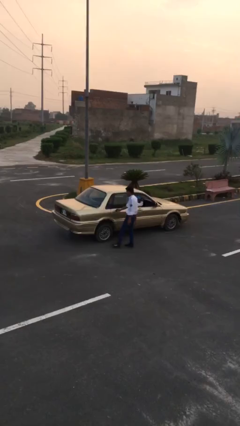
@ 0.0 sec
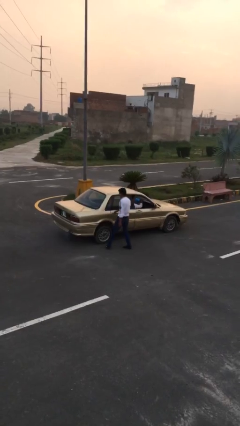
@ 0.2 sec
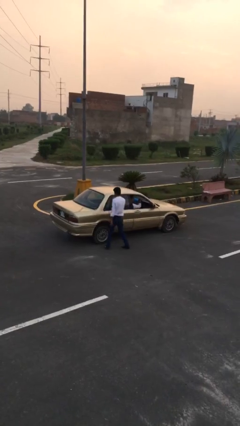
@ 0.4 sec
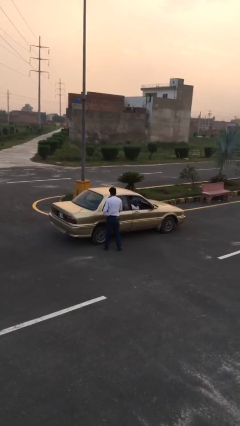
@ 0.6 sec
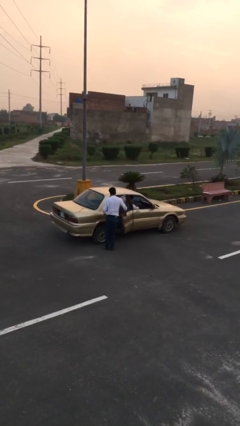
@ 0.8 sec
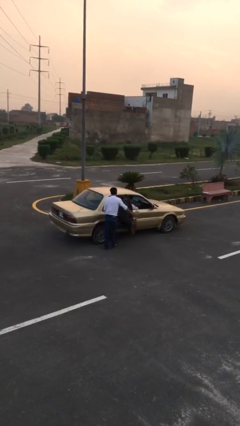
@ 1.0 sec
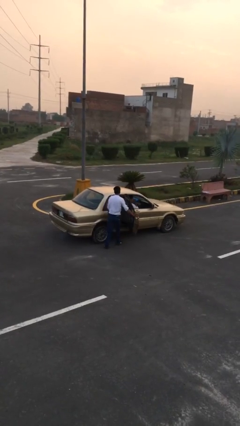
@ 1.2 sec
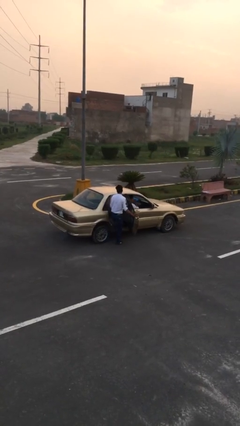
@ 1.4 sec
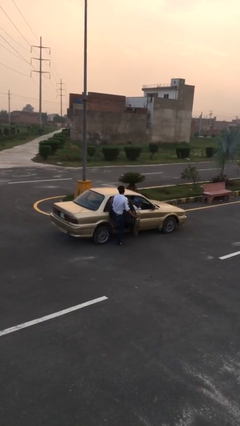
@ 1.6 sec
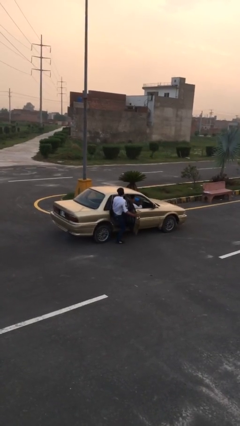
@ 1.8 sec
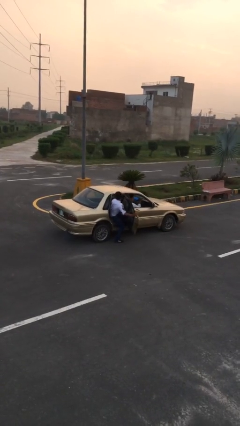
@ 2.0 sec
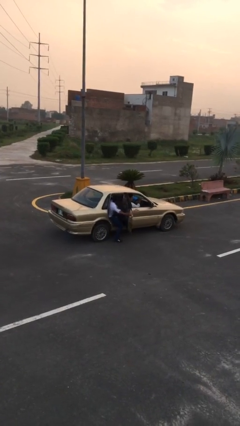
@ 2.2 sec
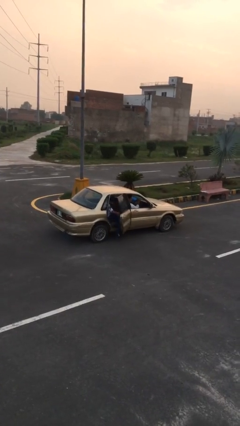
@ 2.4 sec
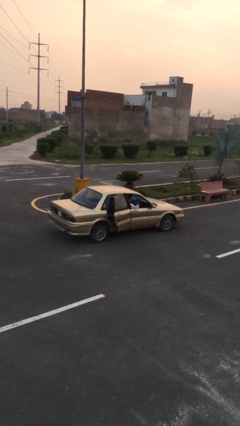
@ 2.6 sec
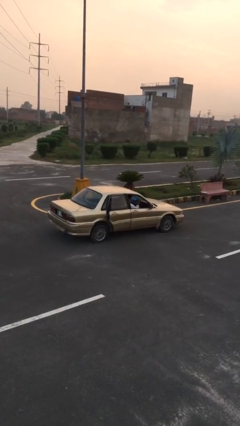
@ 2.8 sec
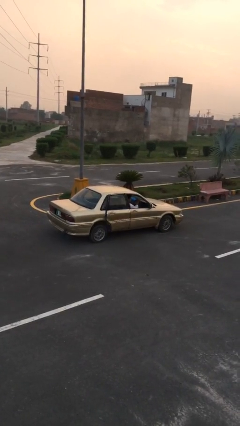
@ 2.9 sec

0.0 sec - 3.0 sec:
car picks up person

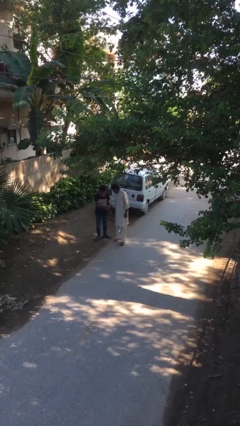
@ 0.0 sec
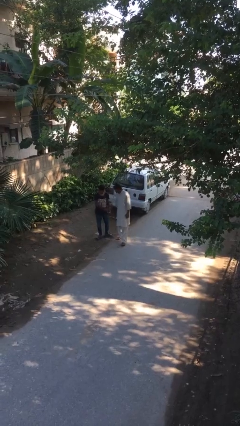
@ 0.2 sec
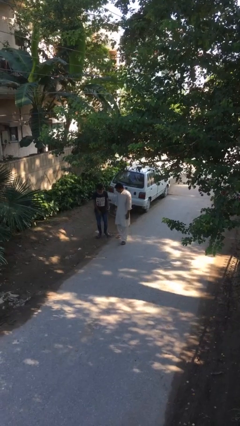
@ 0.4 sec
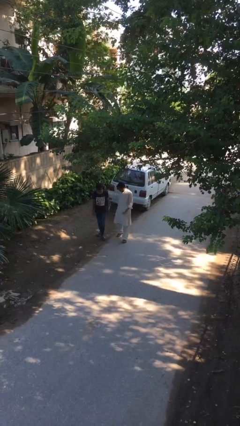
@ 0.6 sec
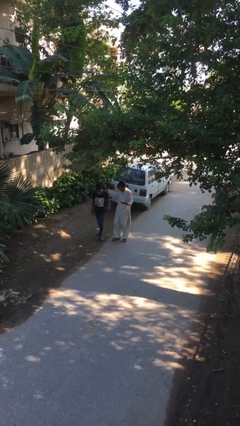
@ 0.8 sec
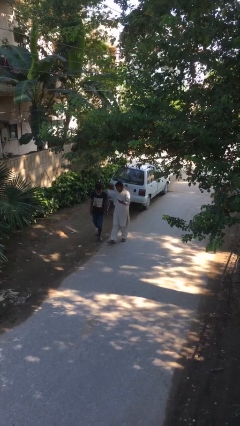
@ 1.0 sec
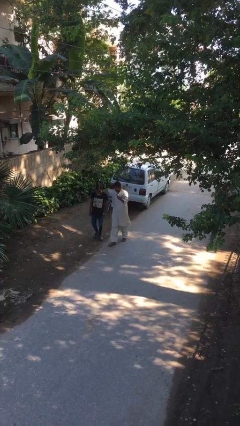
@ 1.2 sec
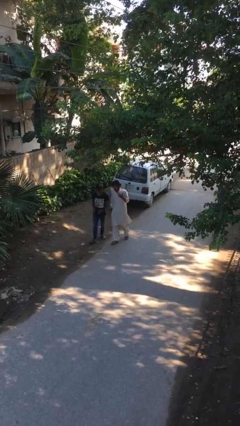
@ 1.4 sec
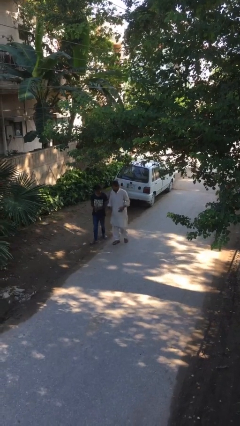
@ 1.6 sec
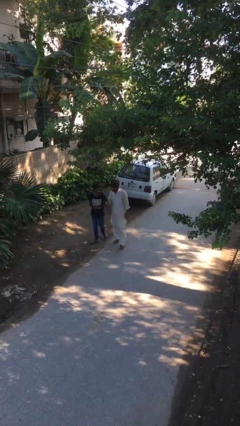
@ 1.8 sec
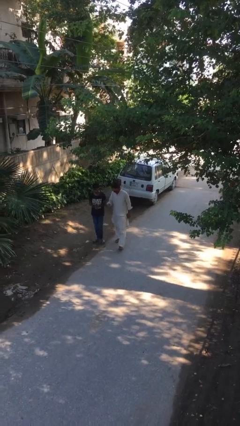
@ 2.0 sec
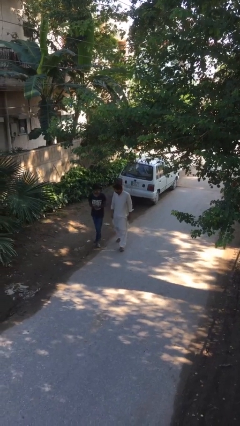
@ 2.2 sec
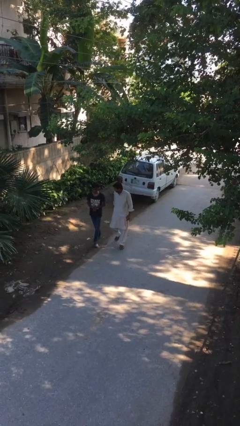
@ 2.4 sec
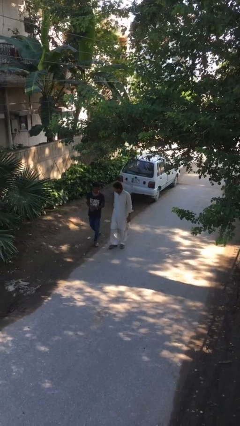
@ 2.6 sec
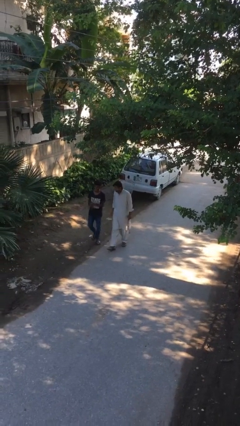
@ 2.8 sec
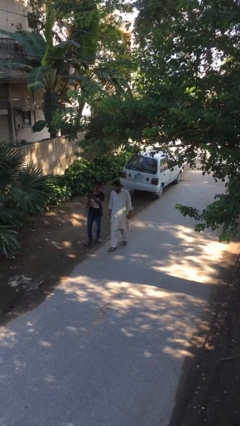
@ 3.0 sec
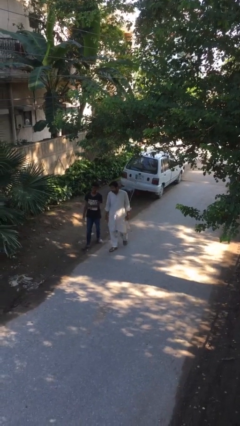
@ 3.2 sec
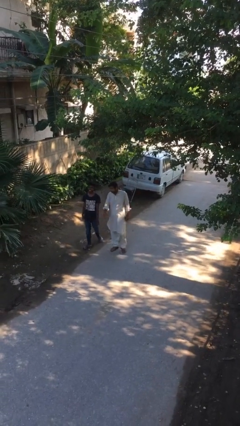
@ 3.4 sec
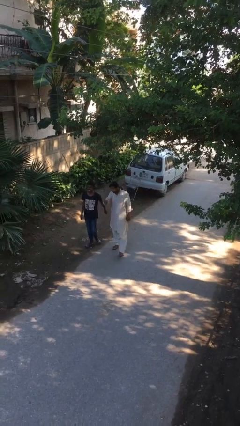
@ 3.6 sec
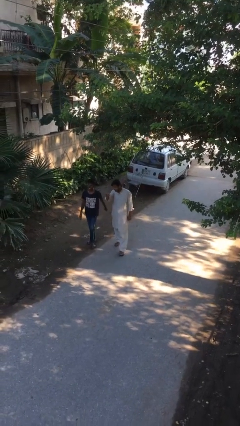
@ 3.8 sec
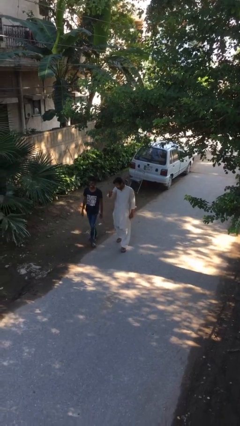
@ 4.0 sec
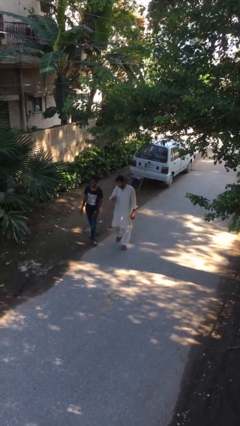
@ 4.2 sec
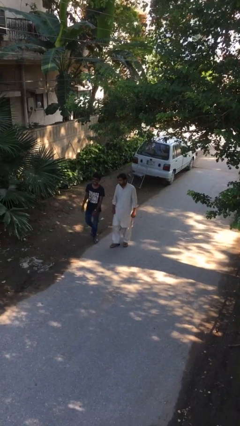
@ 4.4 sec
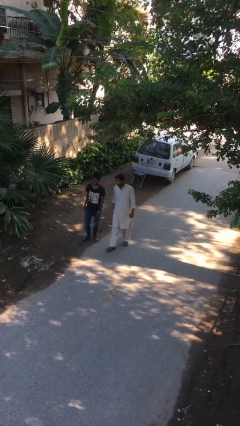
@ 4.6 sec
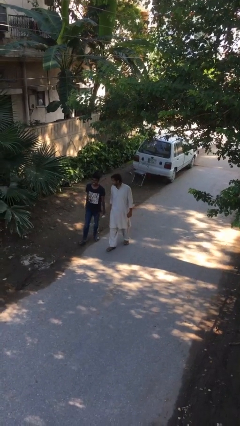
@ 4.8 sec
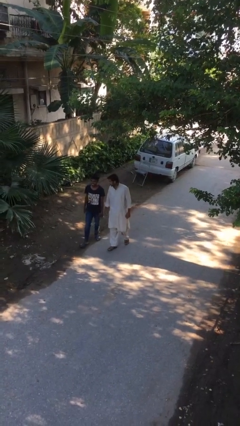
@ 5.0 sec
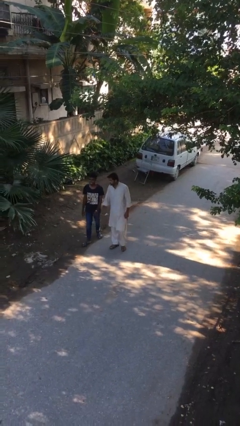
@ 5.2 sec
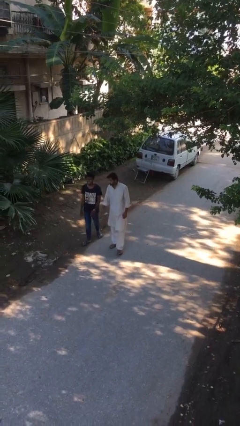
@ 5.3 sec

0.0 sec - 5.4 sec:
person talks to person

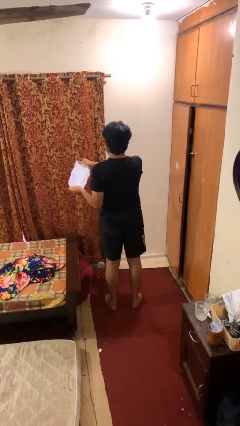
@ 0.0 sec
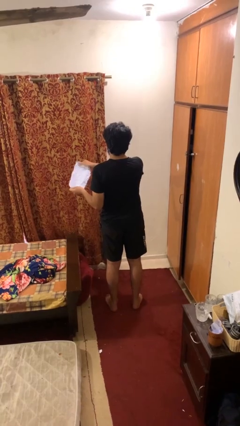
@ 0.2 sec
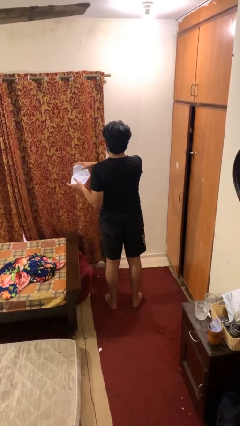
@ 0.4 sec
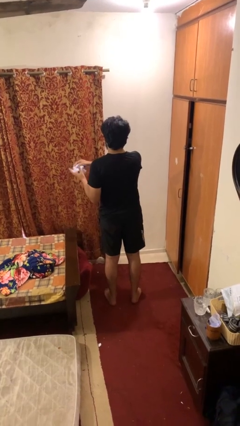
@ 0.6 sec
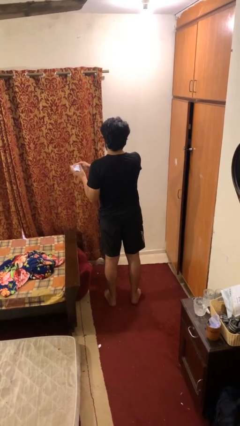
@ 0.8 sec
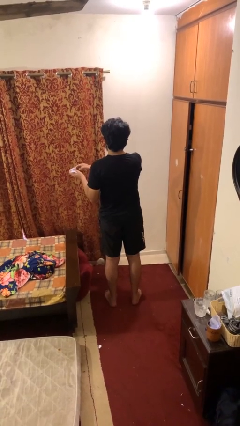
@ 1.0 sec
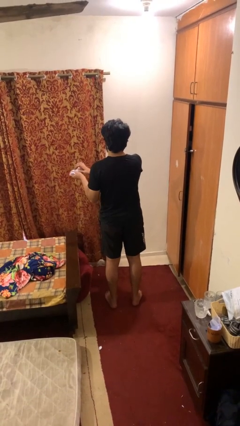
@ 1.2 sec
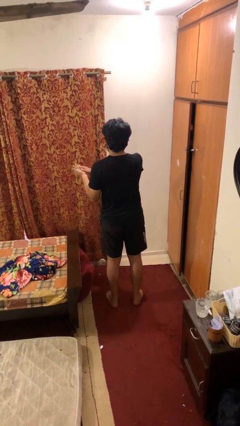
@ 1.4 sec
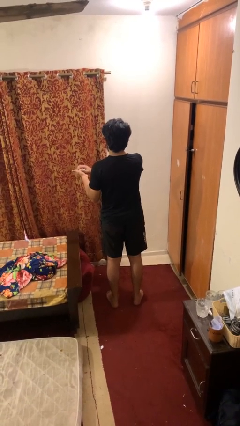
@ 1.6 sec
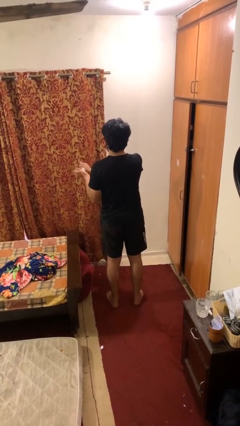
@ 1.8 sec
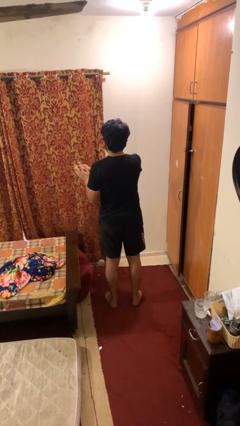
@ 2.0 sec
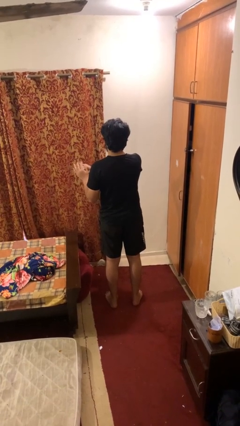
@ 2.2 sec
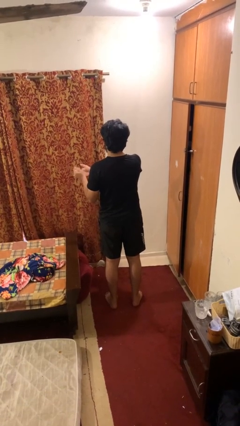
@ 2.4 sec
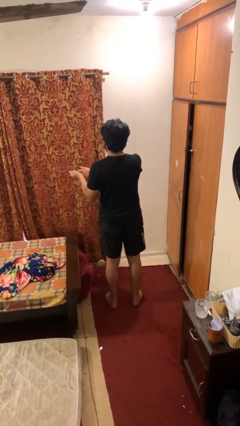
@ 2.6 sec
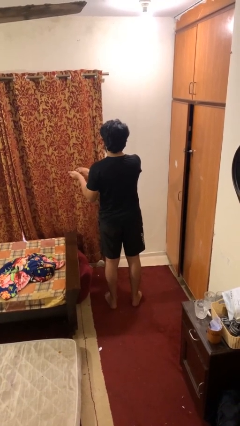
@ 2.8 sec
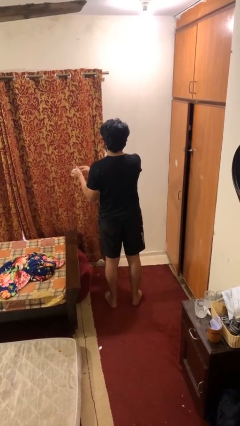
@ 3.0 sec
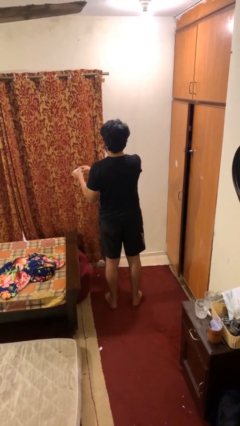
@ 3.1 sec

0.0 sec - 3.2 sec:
person crumples paper

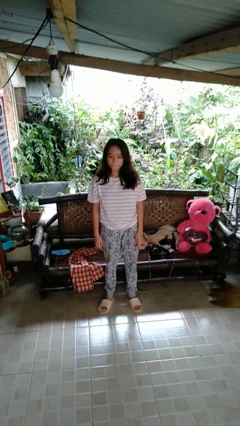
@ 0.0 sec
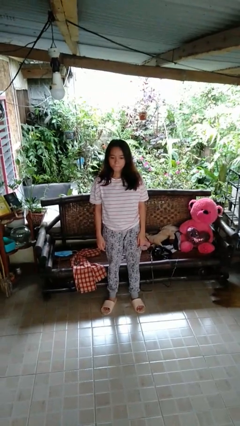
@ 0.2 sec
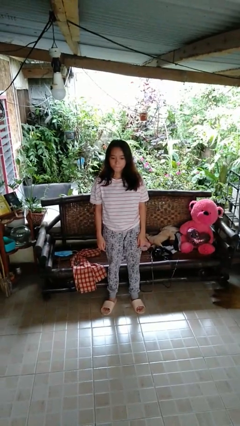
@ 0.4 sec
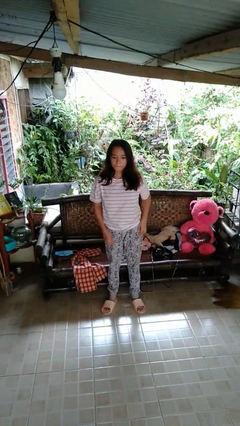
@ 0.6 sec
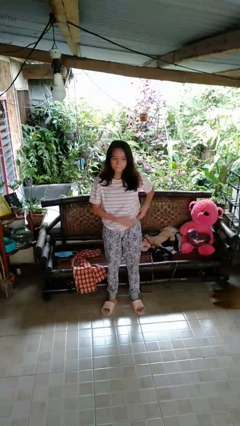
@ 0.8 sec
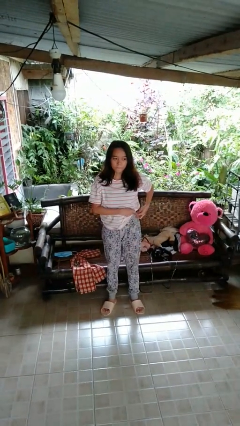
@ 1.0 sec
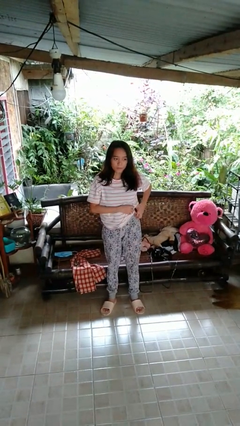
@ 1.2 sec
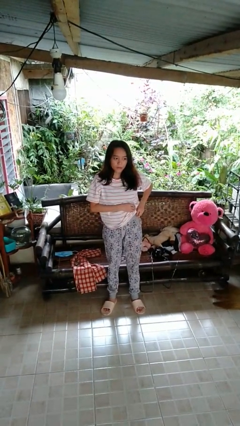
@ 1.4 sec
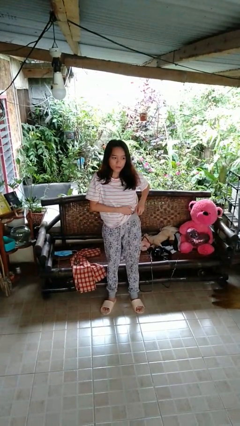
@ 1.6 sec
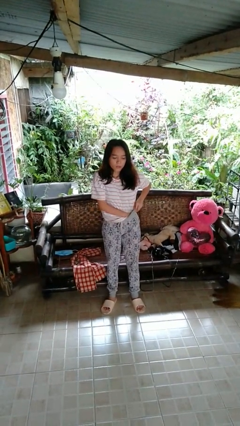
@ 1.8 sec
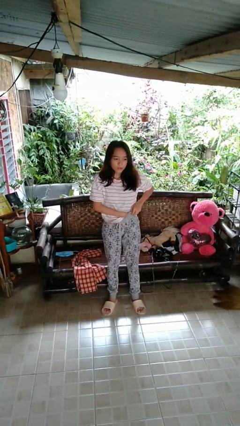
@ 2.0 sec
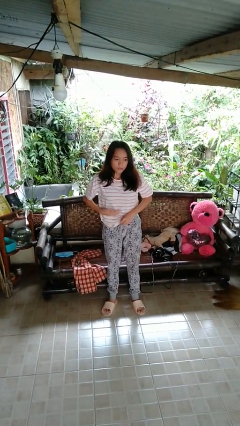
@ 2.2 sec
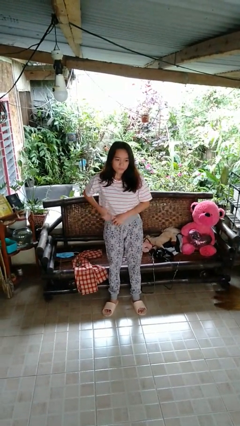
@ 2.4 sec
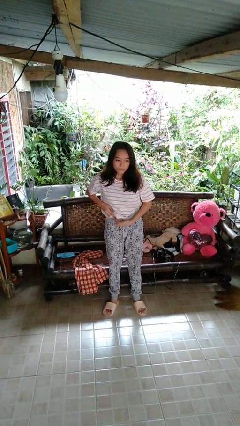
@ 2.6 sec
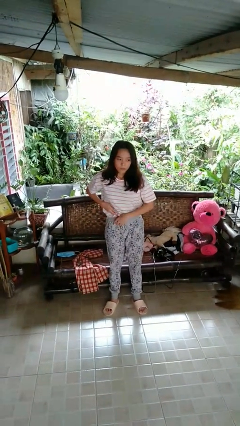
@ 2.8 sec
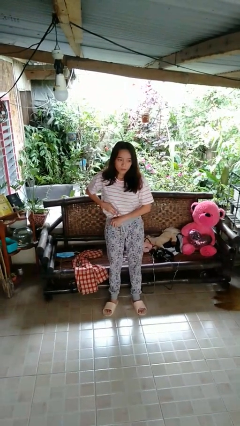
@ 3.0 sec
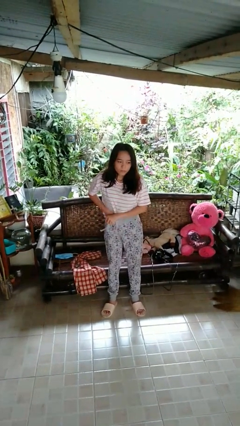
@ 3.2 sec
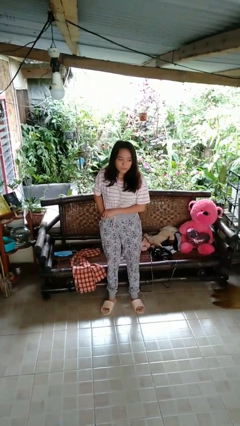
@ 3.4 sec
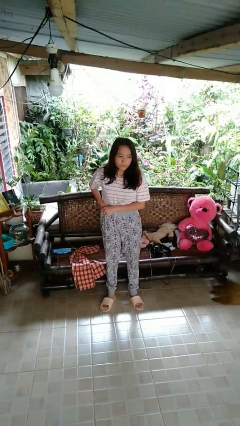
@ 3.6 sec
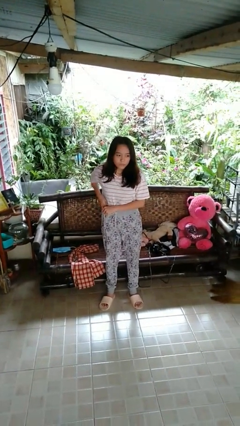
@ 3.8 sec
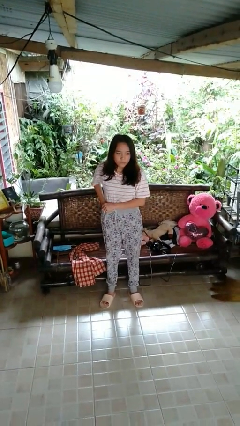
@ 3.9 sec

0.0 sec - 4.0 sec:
person tucks in shirt

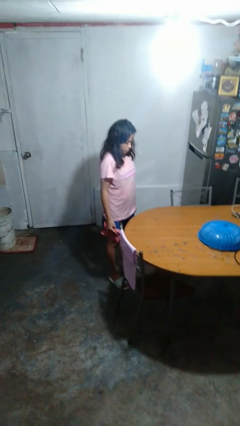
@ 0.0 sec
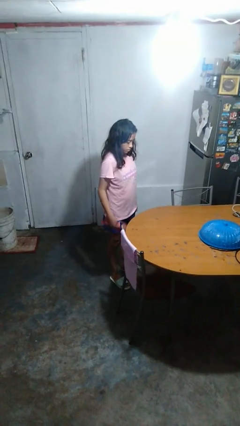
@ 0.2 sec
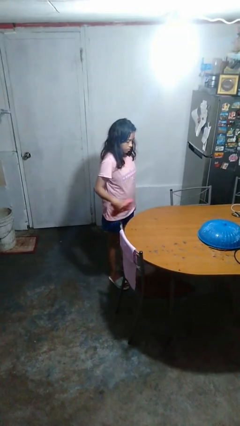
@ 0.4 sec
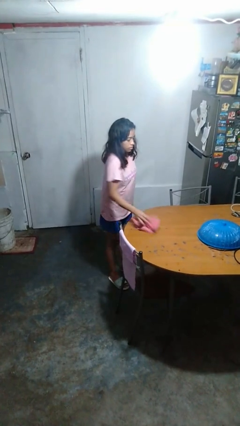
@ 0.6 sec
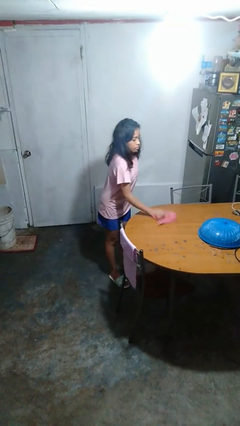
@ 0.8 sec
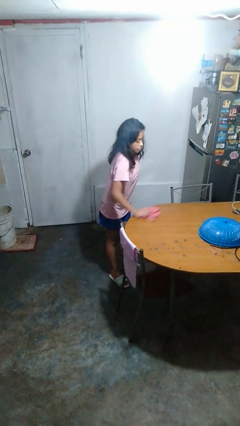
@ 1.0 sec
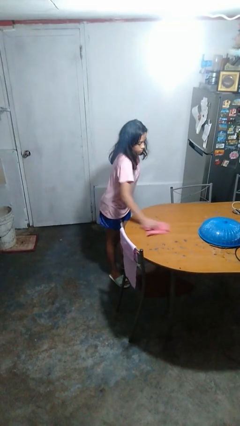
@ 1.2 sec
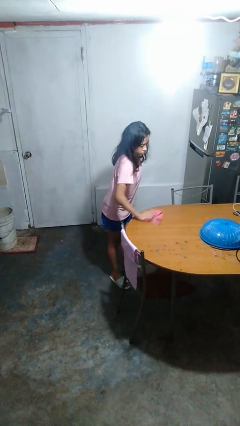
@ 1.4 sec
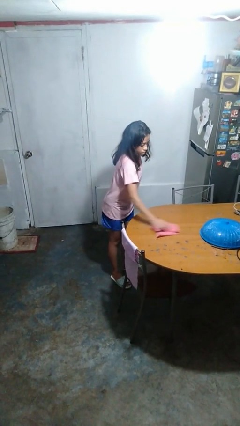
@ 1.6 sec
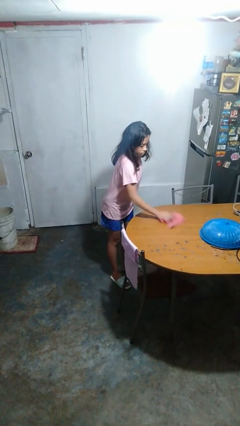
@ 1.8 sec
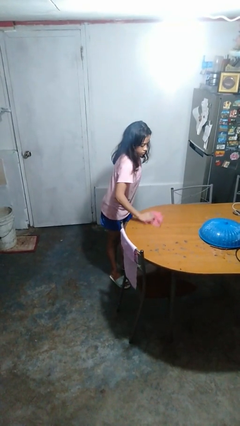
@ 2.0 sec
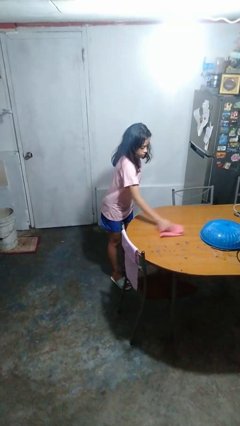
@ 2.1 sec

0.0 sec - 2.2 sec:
person cleans table with rag
